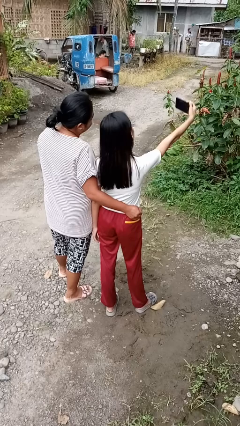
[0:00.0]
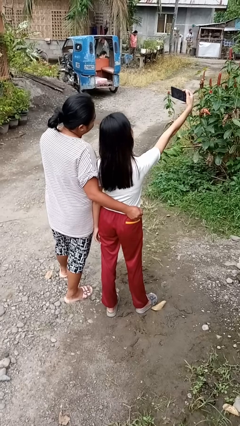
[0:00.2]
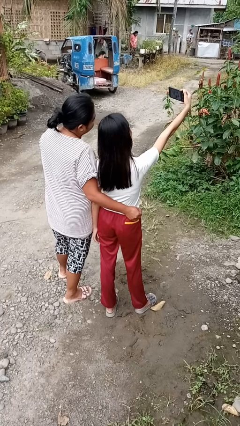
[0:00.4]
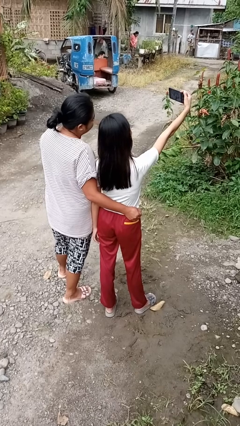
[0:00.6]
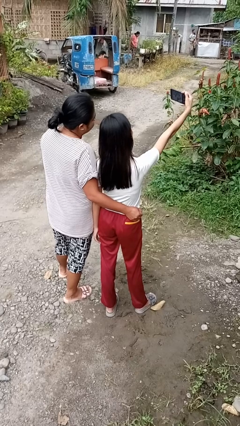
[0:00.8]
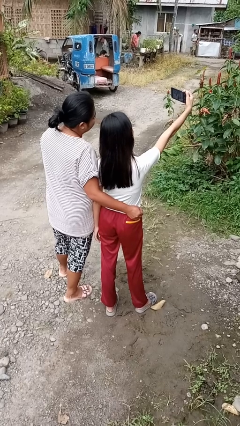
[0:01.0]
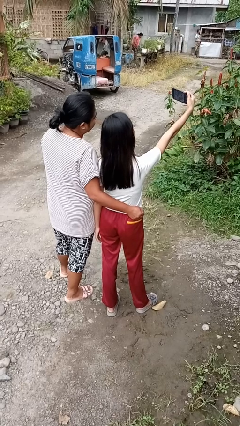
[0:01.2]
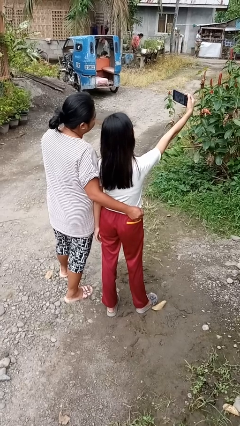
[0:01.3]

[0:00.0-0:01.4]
person takes selfie with person

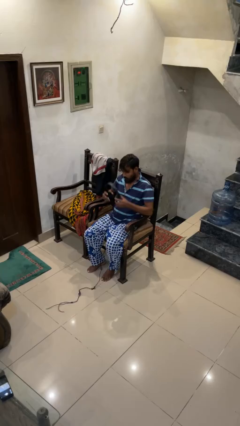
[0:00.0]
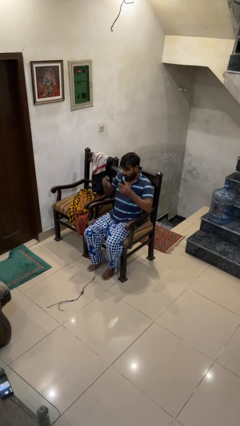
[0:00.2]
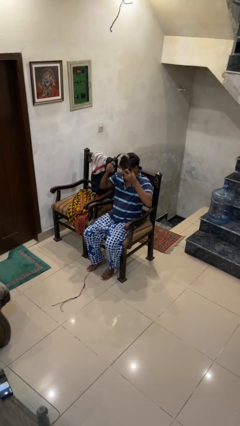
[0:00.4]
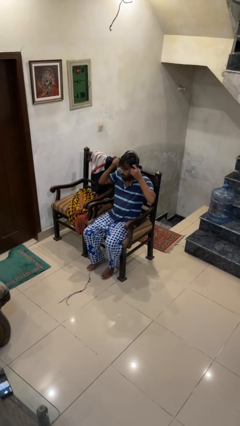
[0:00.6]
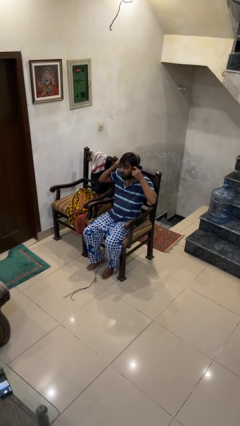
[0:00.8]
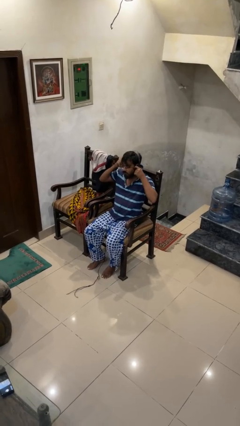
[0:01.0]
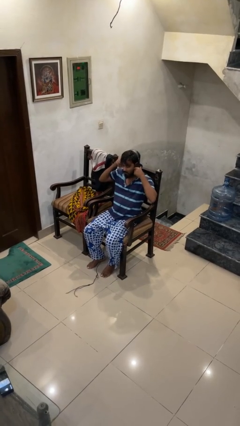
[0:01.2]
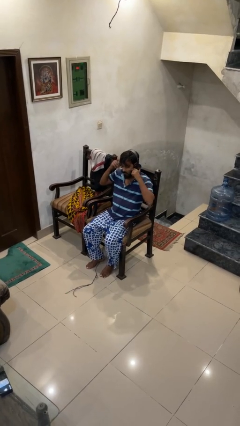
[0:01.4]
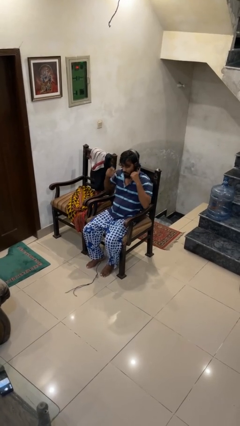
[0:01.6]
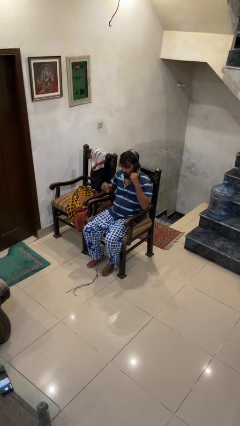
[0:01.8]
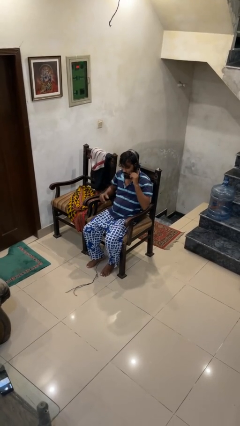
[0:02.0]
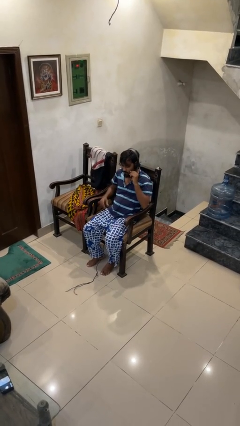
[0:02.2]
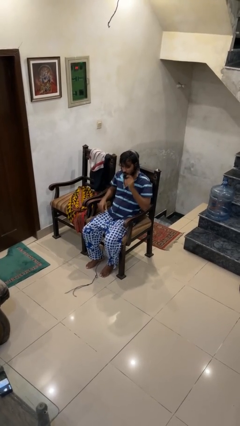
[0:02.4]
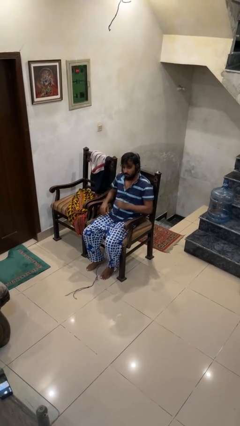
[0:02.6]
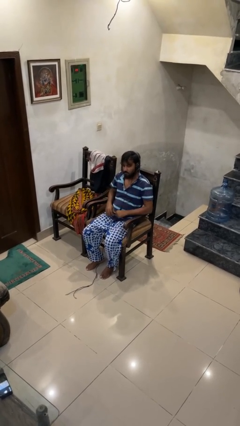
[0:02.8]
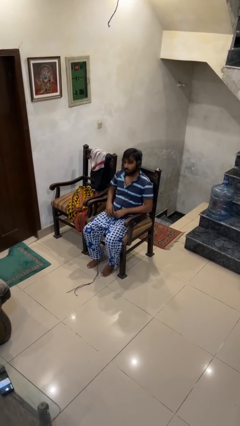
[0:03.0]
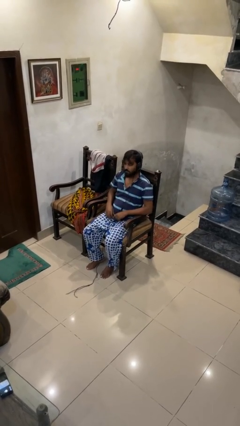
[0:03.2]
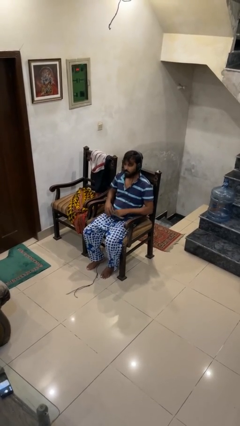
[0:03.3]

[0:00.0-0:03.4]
person puts on headphones

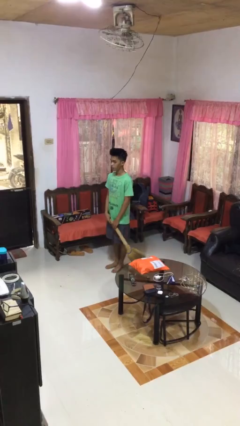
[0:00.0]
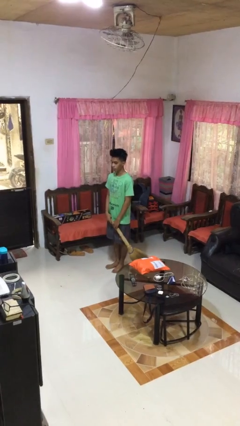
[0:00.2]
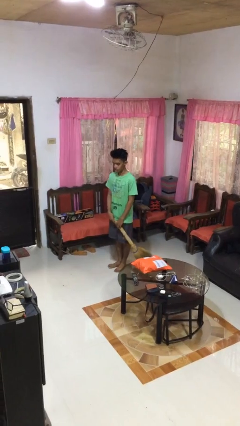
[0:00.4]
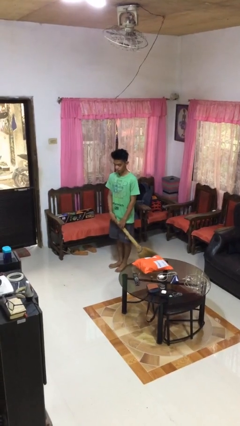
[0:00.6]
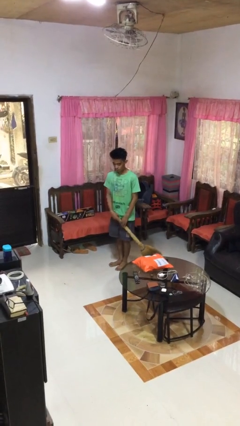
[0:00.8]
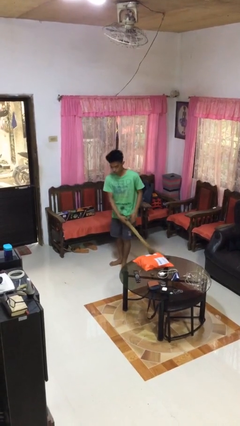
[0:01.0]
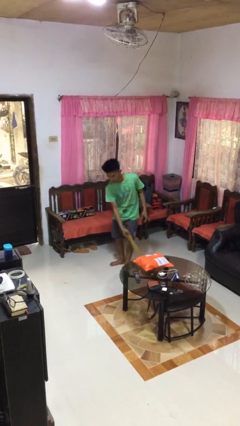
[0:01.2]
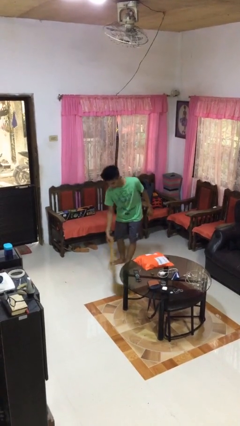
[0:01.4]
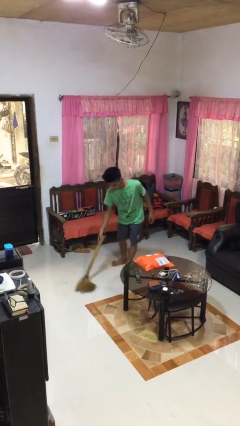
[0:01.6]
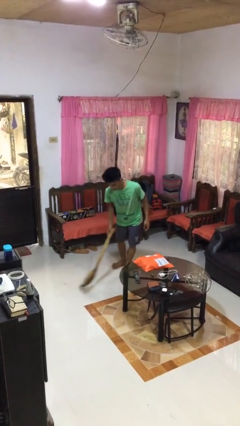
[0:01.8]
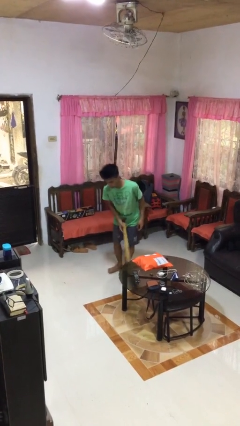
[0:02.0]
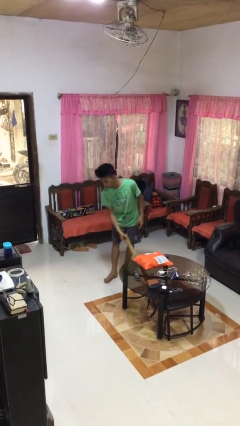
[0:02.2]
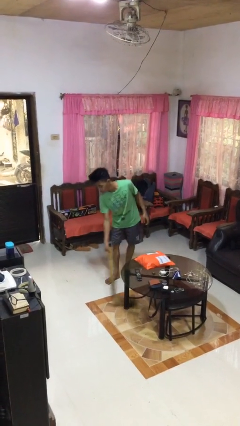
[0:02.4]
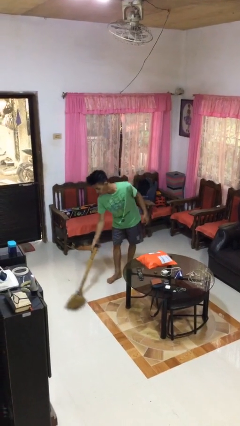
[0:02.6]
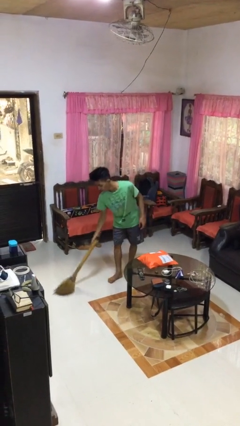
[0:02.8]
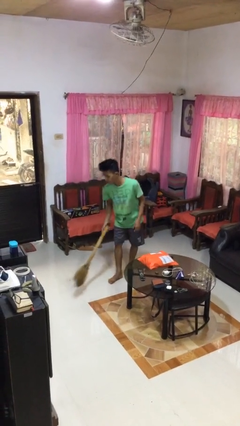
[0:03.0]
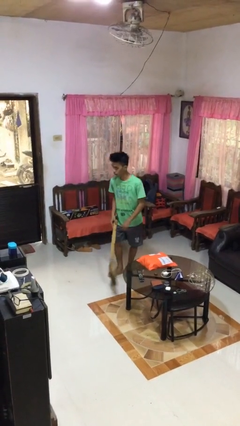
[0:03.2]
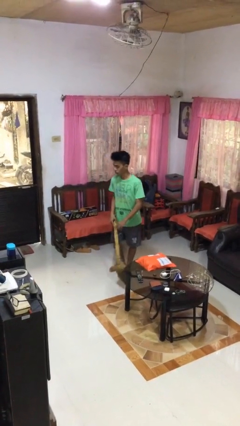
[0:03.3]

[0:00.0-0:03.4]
person sweeps floor

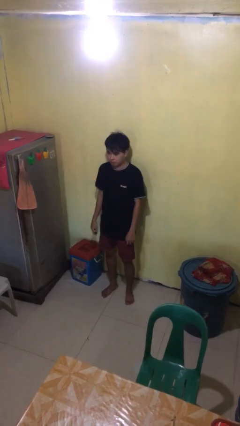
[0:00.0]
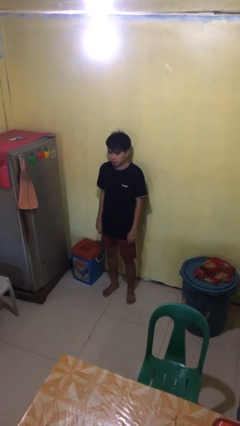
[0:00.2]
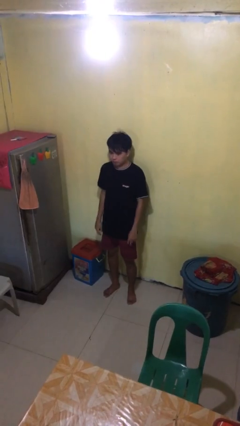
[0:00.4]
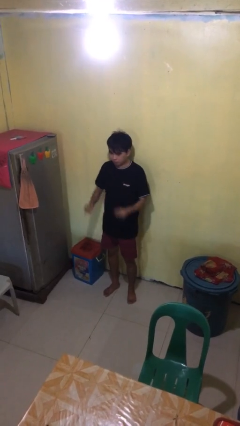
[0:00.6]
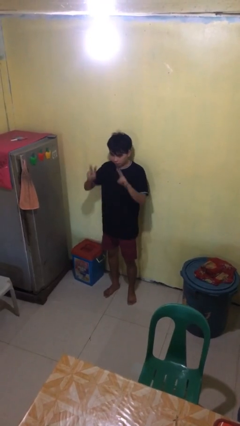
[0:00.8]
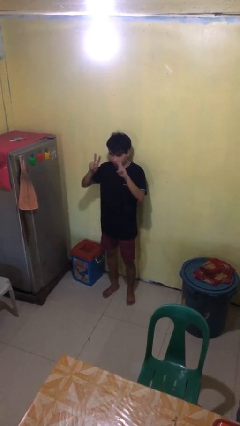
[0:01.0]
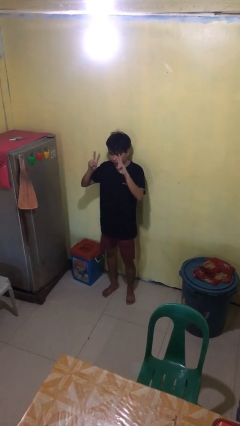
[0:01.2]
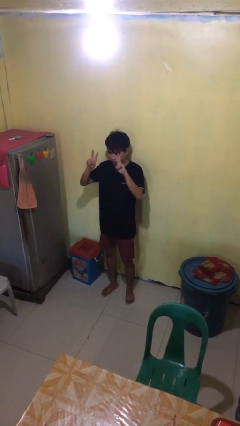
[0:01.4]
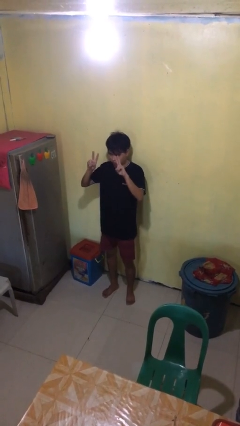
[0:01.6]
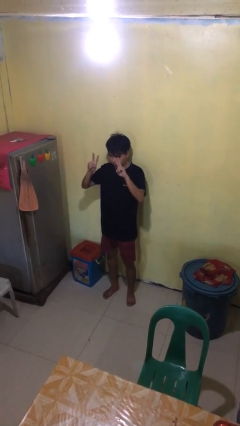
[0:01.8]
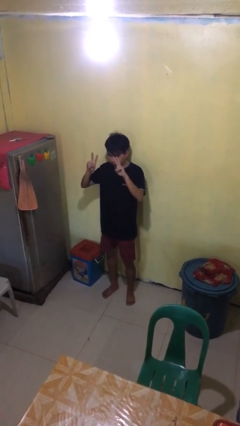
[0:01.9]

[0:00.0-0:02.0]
person gestures peace

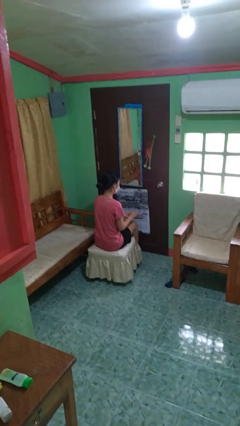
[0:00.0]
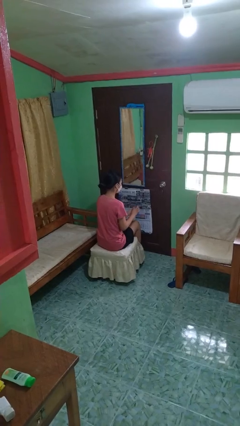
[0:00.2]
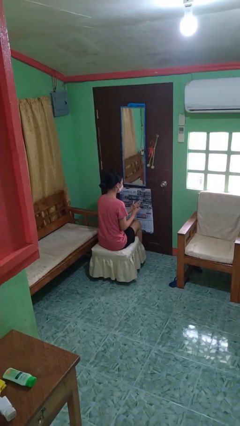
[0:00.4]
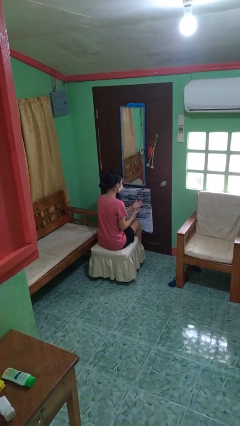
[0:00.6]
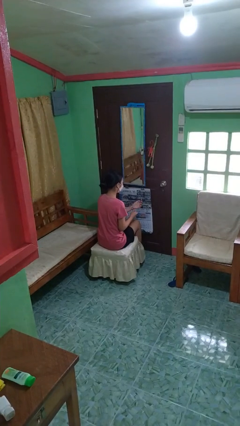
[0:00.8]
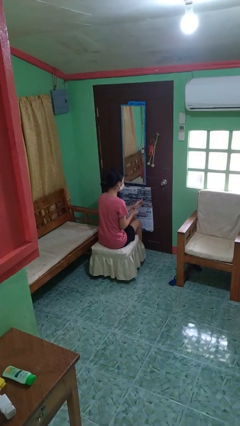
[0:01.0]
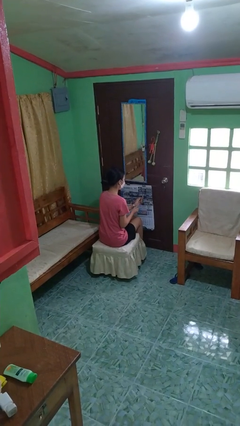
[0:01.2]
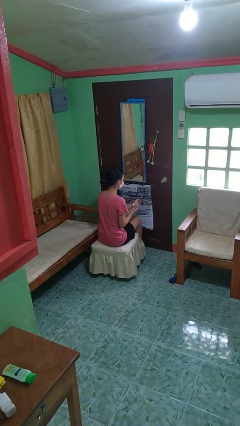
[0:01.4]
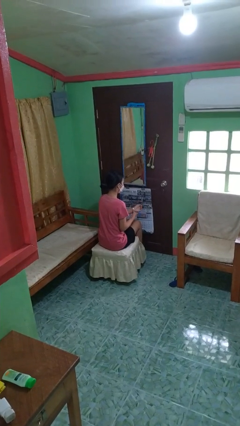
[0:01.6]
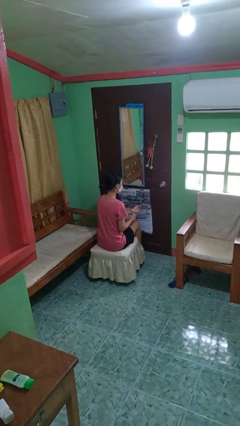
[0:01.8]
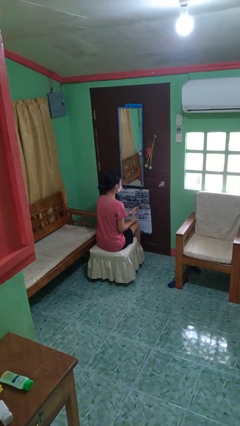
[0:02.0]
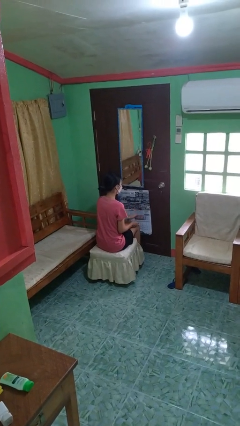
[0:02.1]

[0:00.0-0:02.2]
person puts on wristwatch

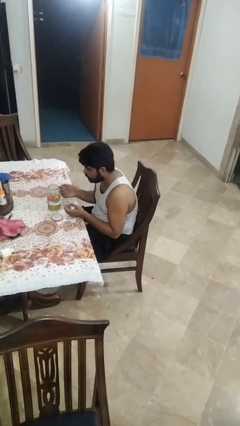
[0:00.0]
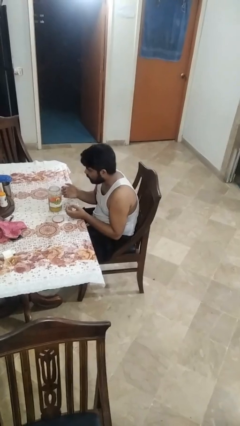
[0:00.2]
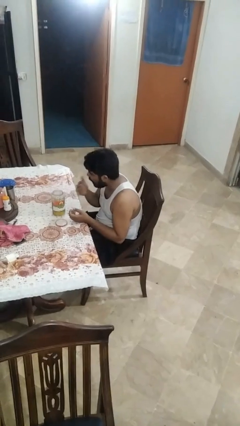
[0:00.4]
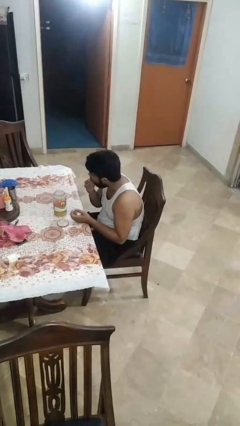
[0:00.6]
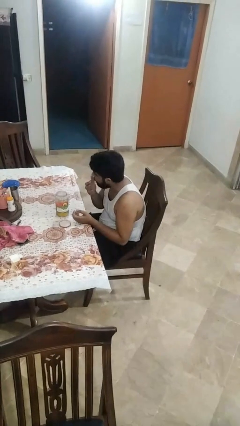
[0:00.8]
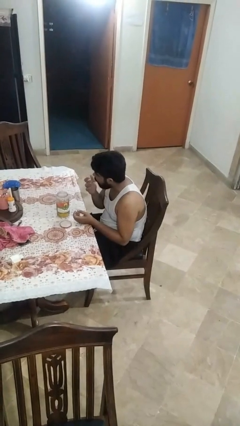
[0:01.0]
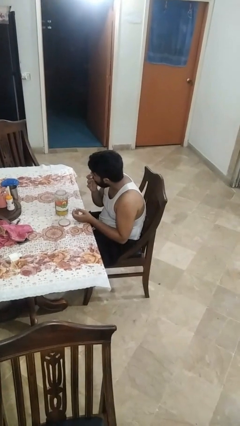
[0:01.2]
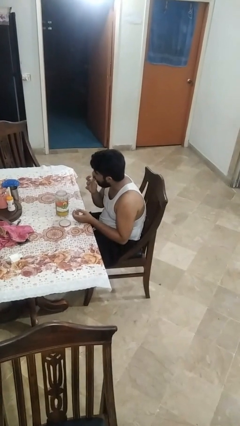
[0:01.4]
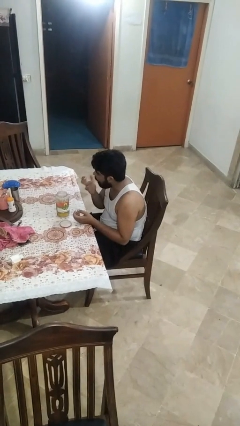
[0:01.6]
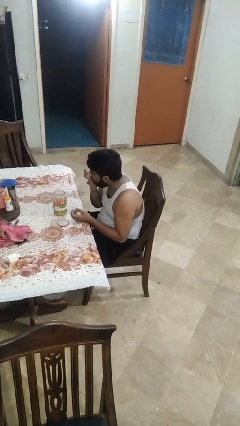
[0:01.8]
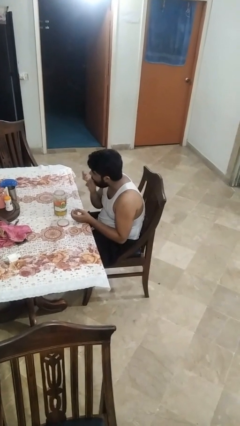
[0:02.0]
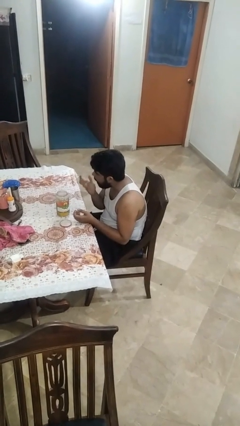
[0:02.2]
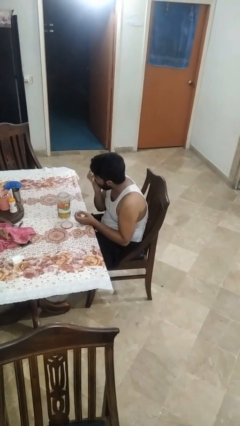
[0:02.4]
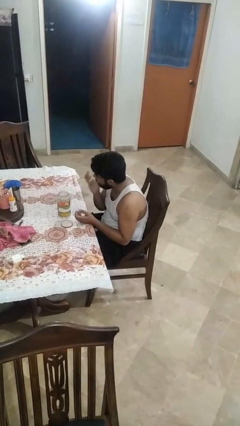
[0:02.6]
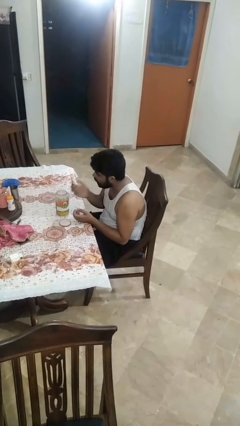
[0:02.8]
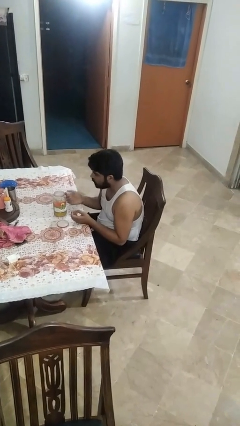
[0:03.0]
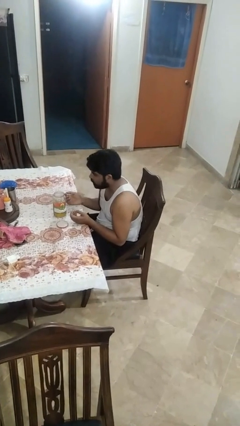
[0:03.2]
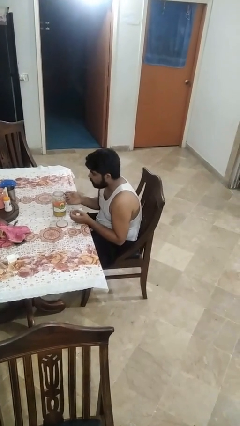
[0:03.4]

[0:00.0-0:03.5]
person licks fingers

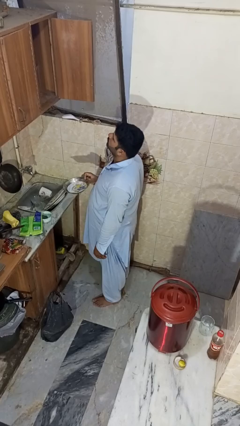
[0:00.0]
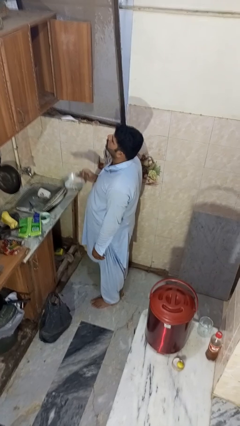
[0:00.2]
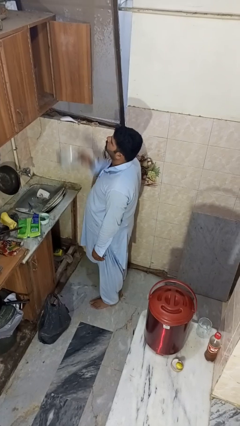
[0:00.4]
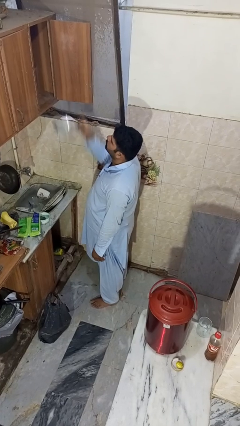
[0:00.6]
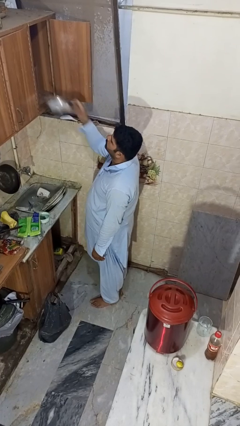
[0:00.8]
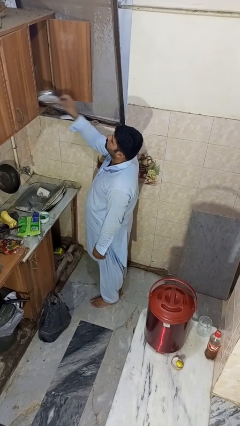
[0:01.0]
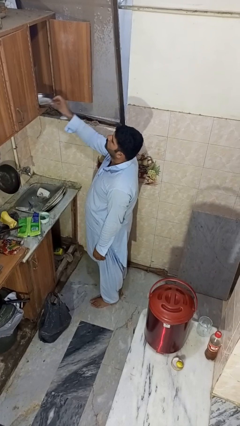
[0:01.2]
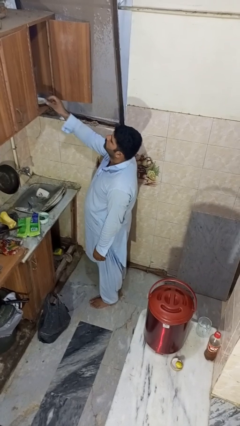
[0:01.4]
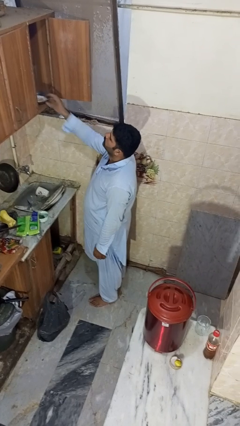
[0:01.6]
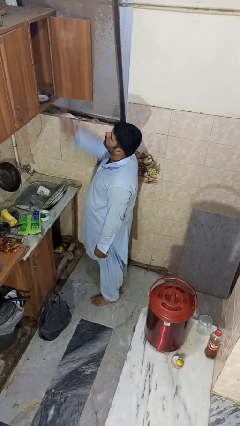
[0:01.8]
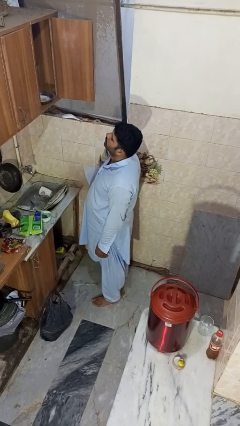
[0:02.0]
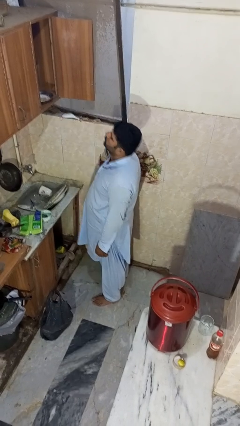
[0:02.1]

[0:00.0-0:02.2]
person puts object in cabinet
